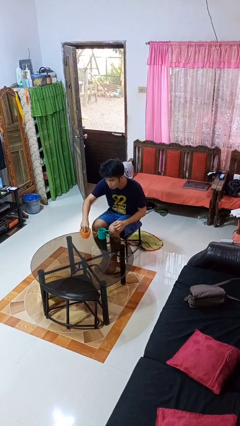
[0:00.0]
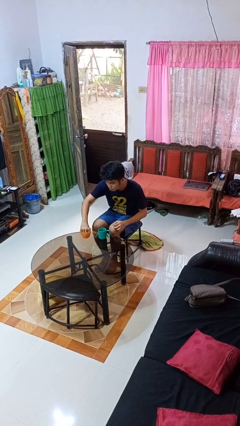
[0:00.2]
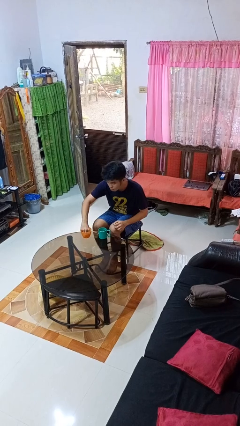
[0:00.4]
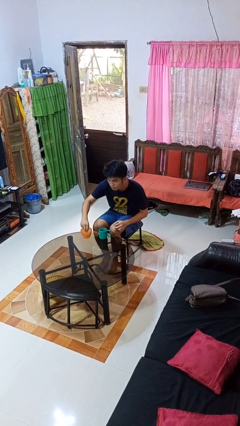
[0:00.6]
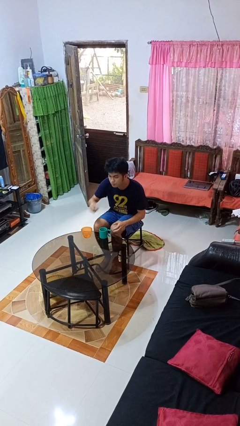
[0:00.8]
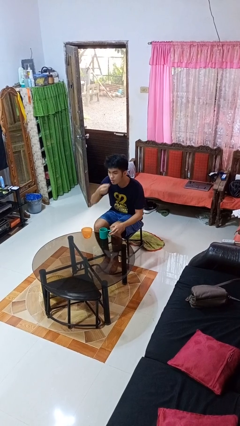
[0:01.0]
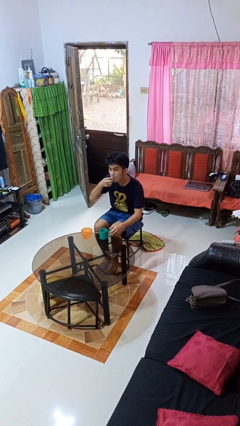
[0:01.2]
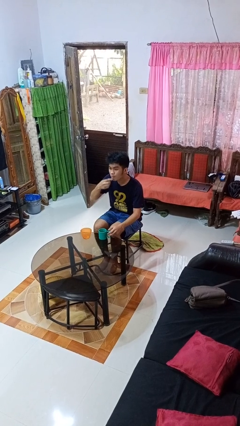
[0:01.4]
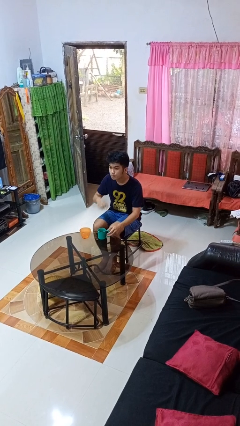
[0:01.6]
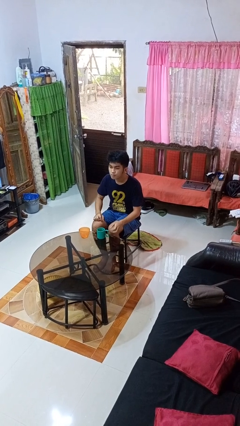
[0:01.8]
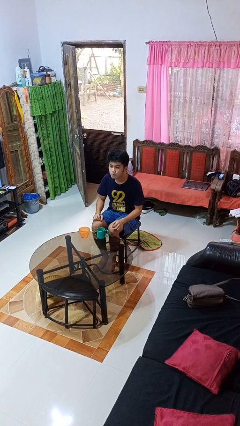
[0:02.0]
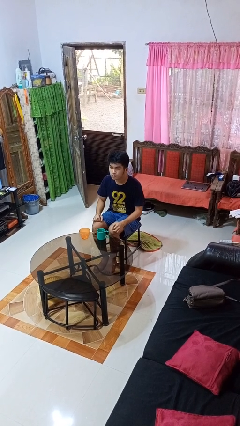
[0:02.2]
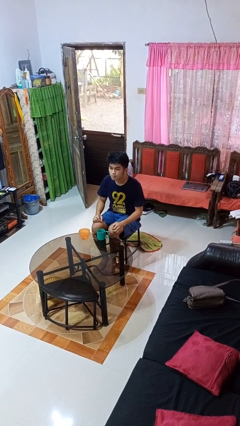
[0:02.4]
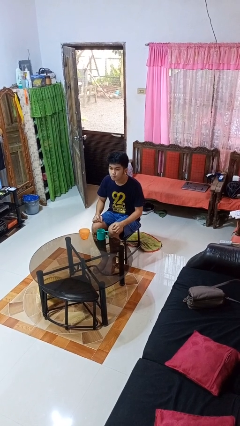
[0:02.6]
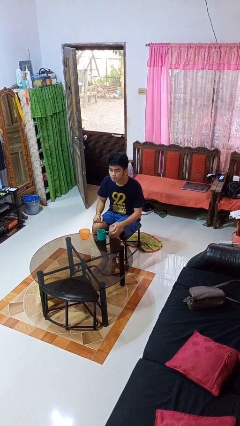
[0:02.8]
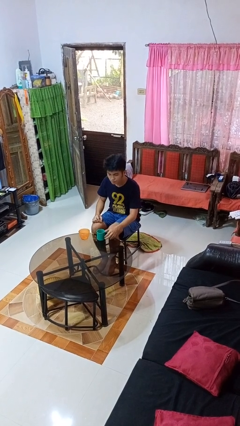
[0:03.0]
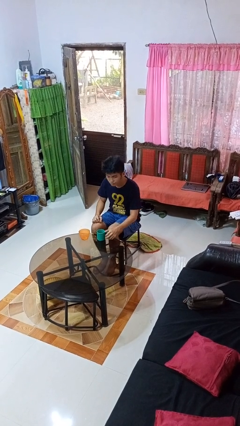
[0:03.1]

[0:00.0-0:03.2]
person takes medicine pills

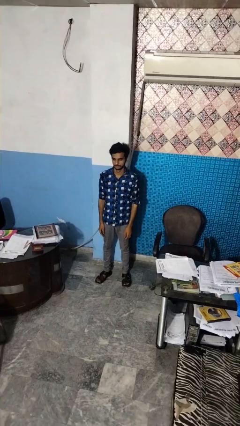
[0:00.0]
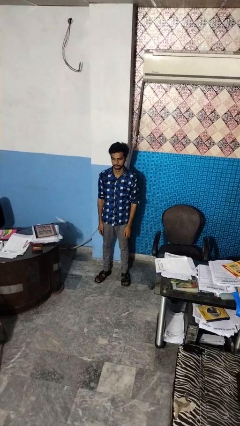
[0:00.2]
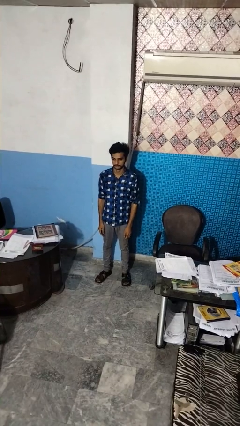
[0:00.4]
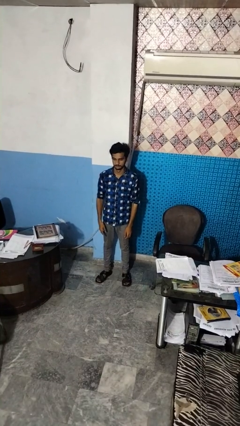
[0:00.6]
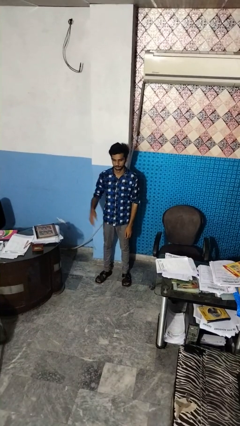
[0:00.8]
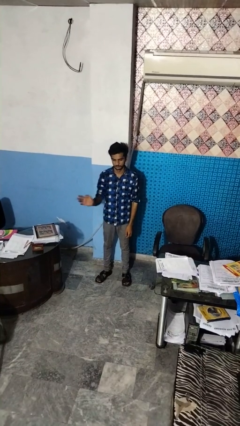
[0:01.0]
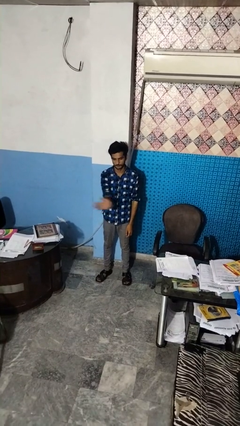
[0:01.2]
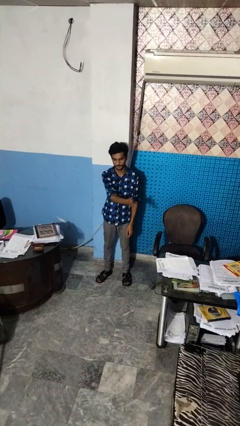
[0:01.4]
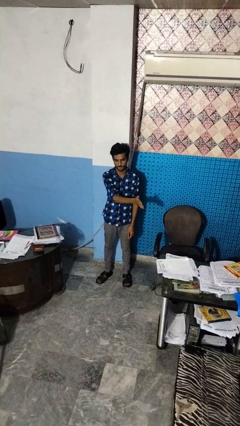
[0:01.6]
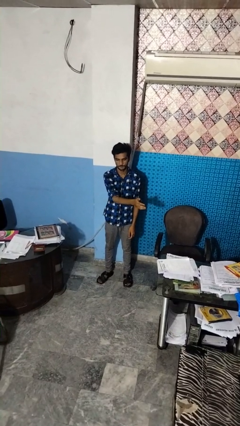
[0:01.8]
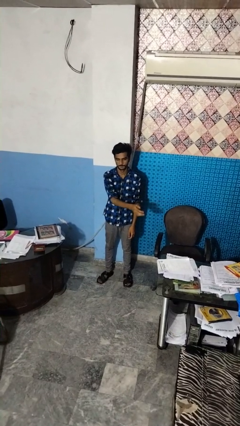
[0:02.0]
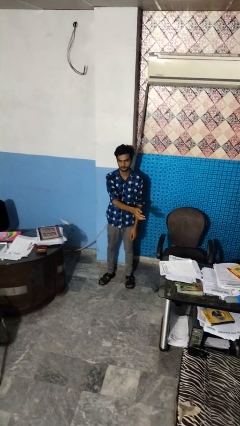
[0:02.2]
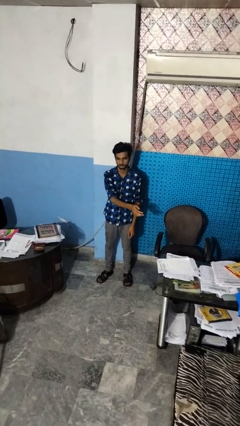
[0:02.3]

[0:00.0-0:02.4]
person gestures swipe left

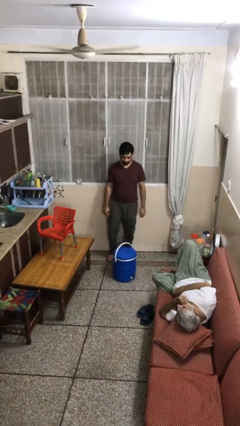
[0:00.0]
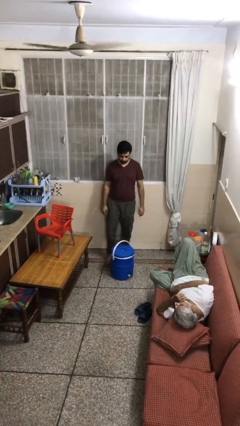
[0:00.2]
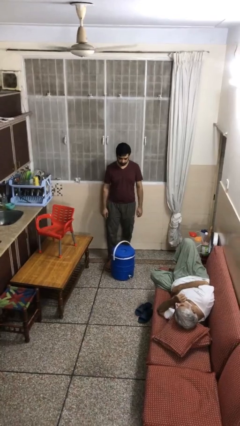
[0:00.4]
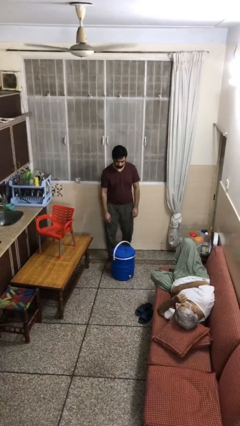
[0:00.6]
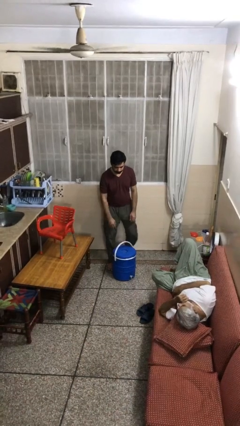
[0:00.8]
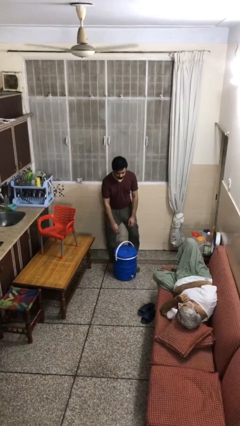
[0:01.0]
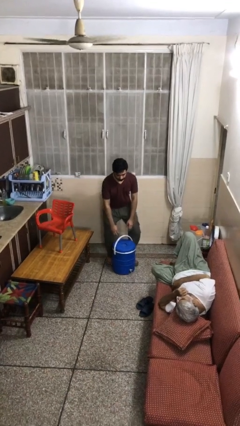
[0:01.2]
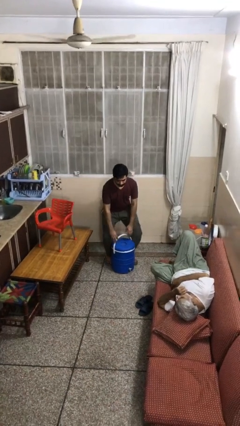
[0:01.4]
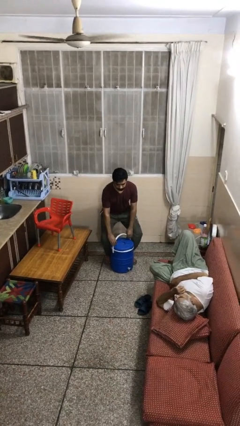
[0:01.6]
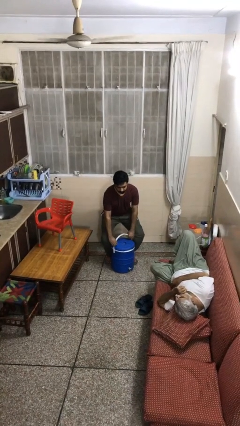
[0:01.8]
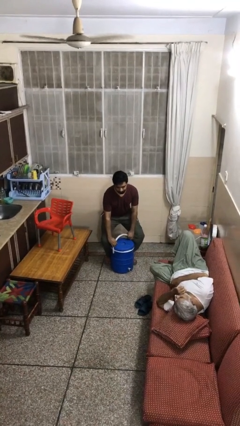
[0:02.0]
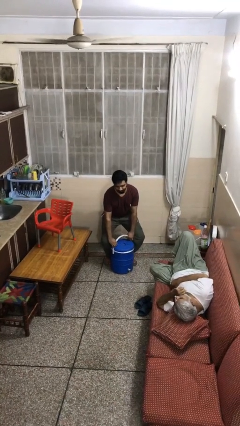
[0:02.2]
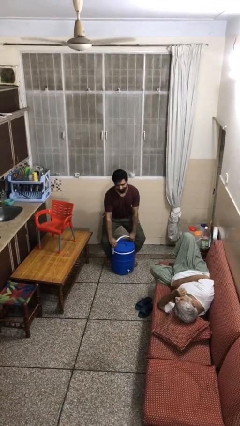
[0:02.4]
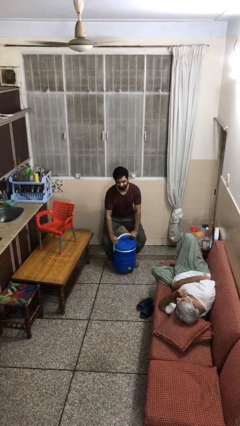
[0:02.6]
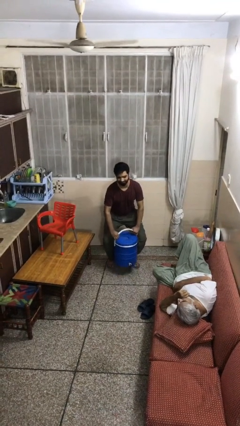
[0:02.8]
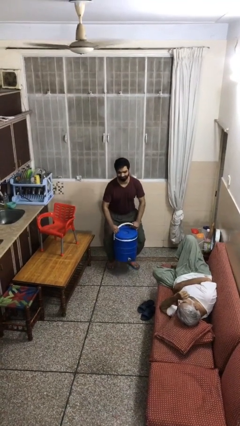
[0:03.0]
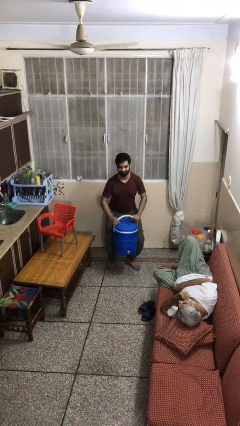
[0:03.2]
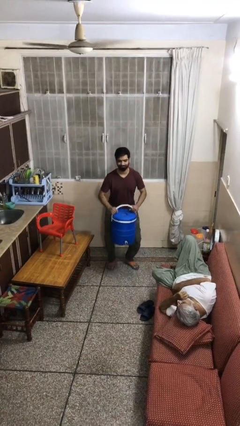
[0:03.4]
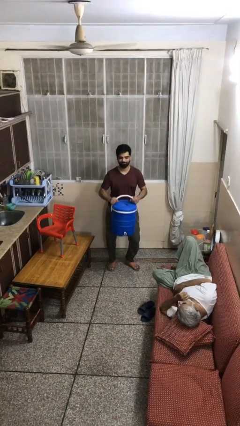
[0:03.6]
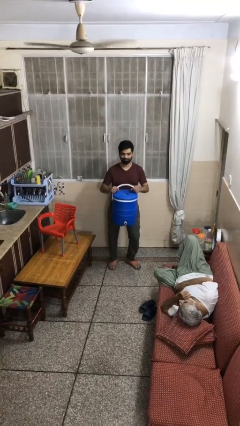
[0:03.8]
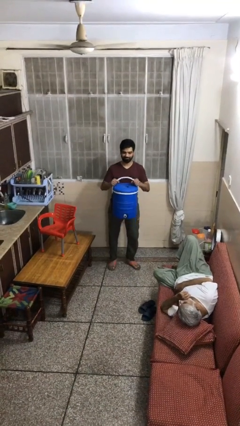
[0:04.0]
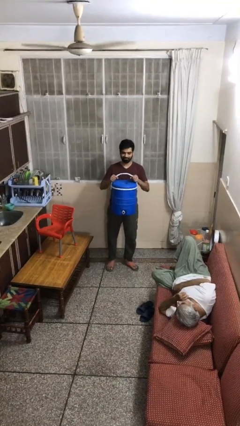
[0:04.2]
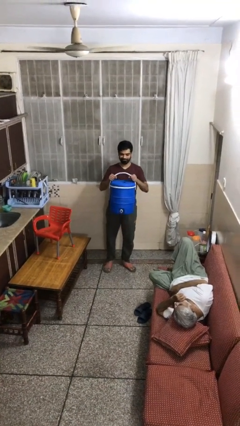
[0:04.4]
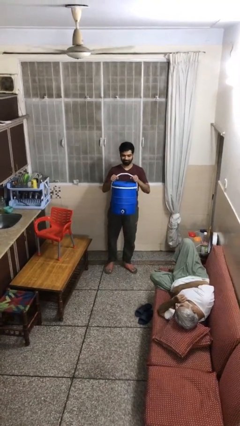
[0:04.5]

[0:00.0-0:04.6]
person picks up object from floor

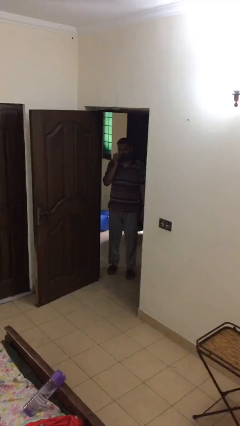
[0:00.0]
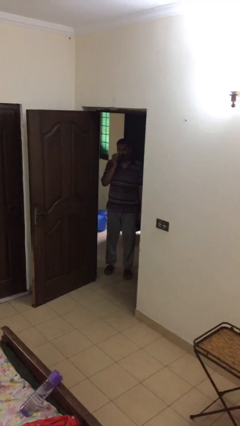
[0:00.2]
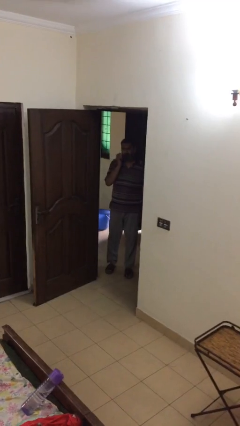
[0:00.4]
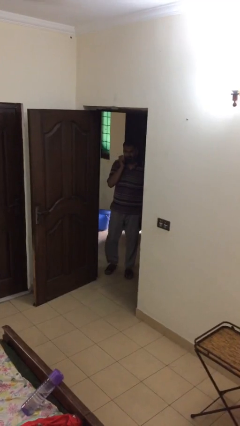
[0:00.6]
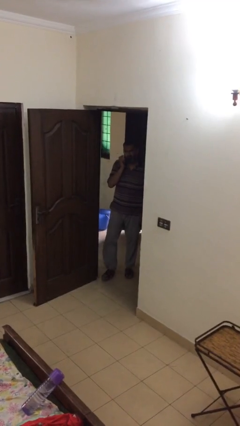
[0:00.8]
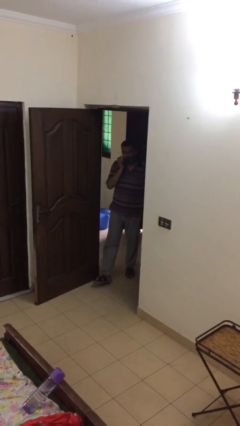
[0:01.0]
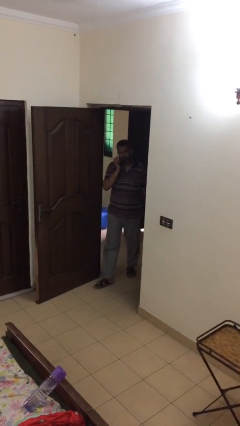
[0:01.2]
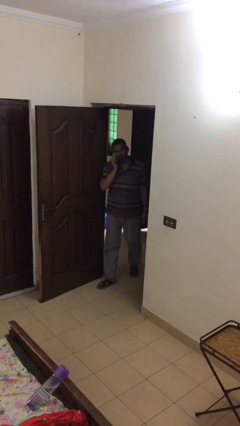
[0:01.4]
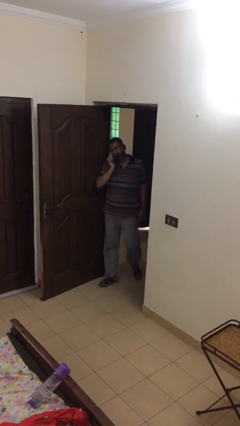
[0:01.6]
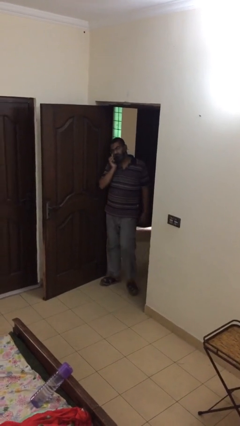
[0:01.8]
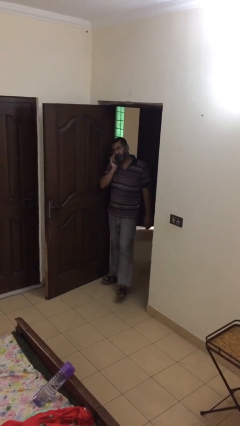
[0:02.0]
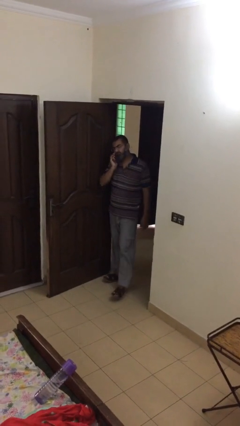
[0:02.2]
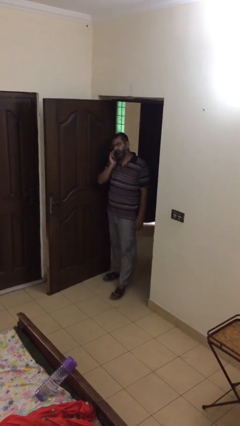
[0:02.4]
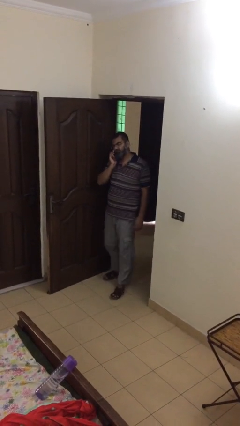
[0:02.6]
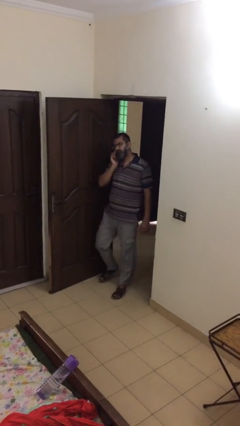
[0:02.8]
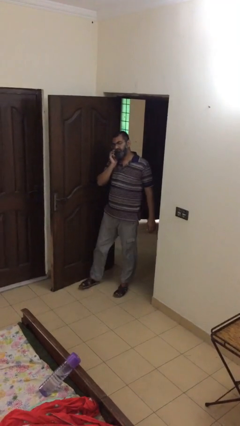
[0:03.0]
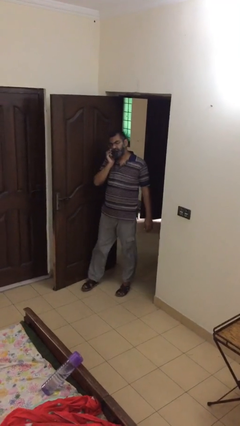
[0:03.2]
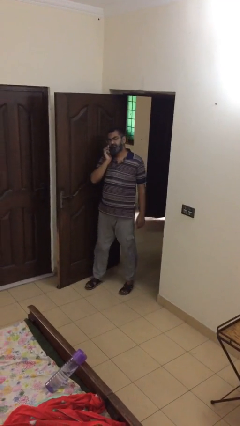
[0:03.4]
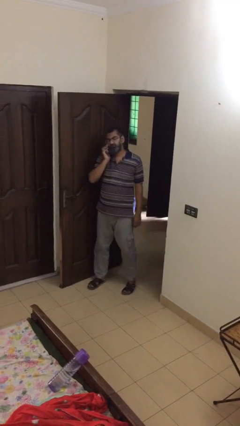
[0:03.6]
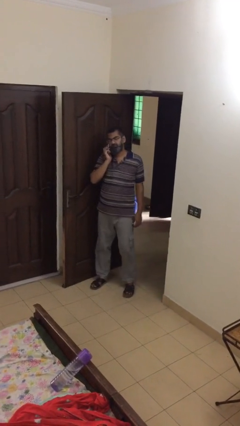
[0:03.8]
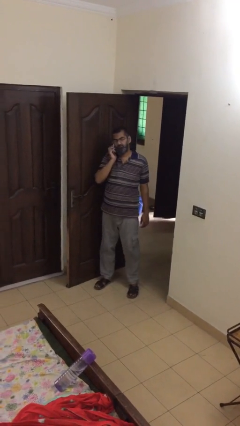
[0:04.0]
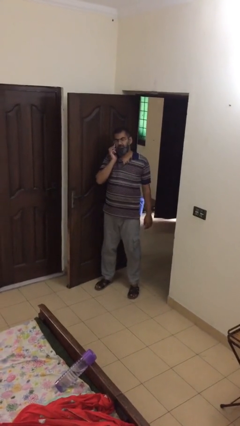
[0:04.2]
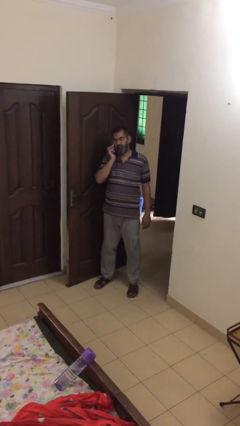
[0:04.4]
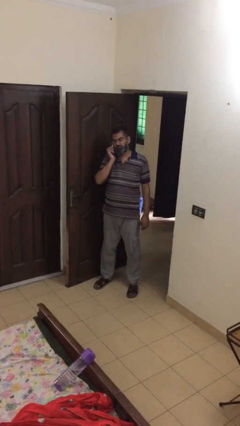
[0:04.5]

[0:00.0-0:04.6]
person enters scene through structure

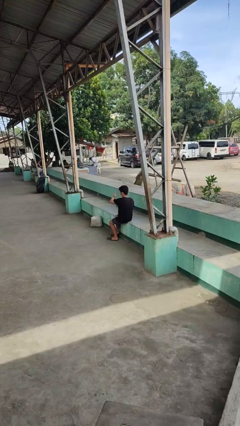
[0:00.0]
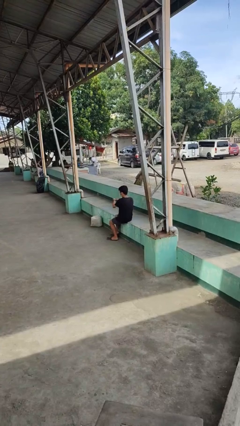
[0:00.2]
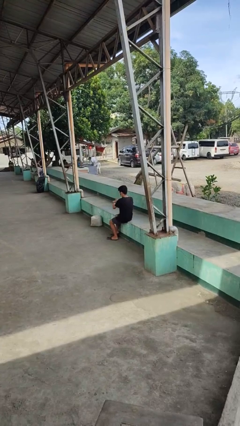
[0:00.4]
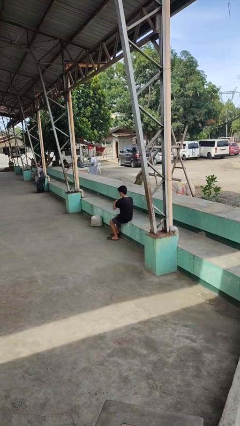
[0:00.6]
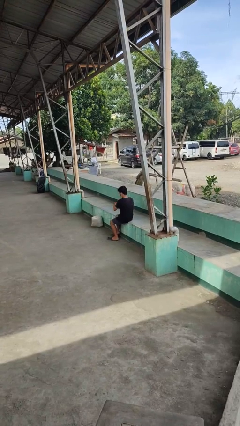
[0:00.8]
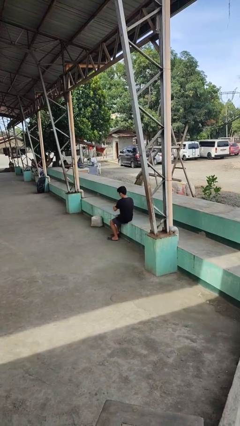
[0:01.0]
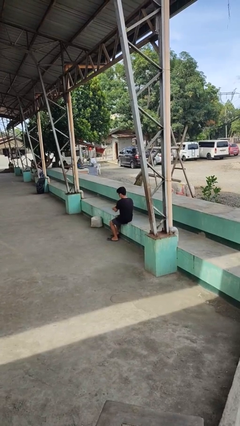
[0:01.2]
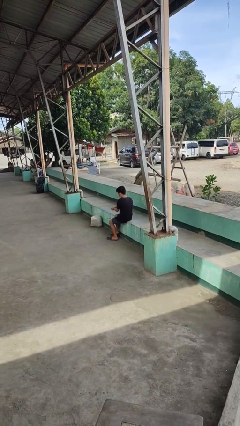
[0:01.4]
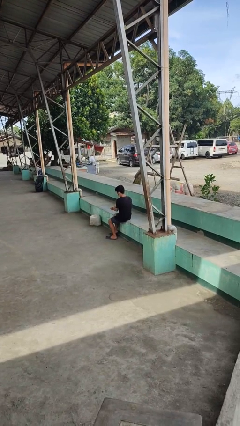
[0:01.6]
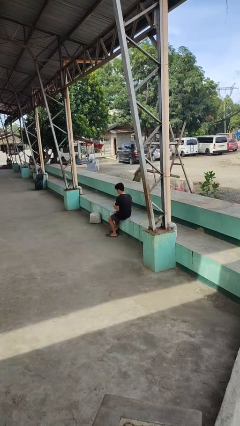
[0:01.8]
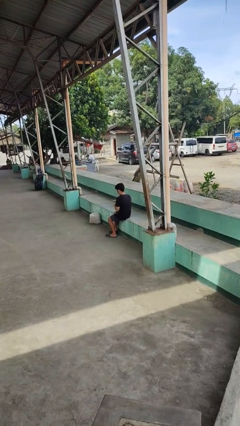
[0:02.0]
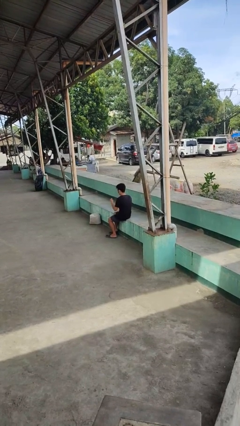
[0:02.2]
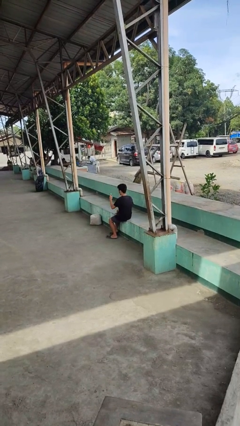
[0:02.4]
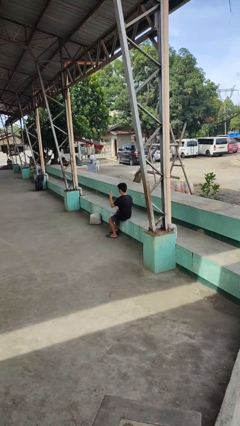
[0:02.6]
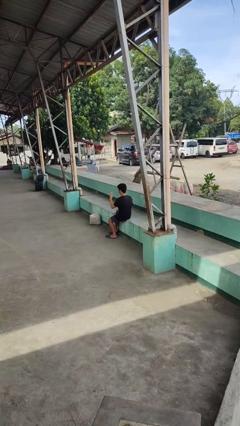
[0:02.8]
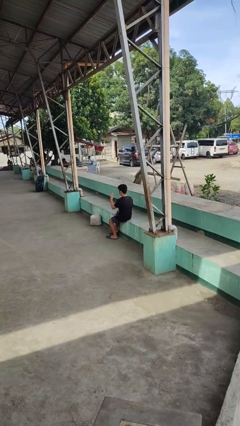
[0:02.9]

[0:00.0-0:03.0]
person takes off wristwatch
